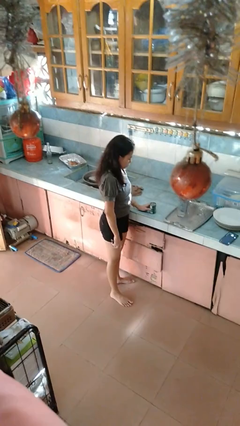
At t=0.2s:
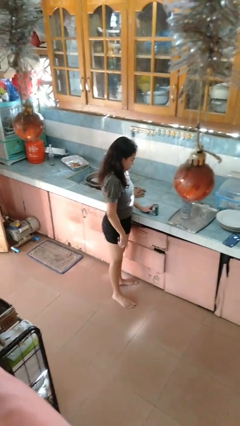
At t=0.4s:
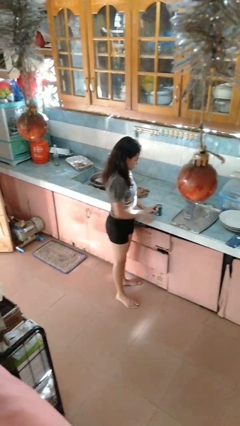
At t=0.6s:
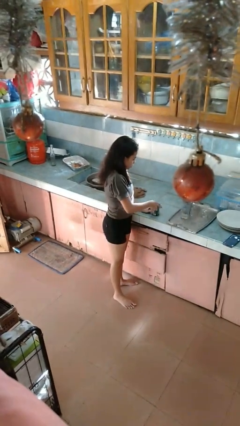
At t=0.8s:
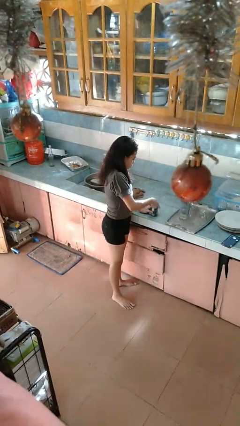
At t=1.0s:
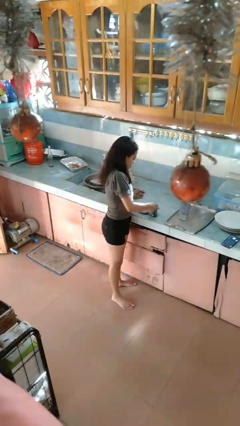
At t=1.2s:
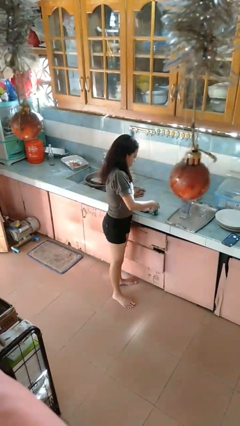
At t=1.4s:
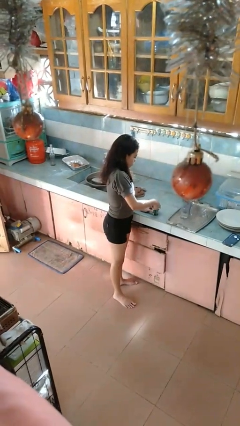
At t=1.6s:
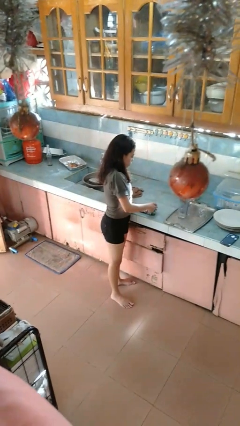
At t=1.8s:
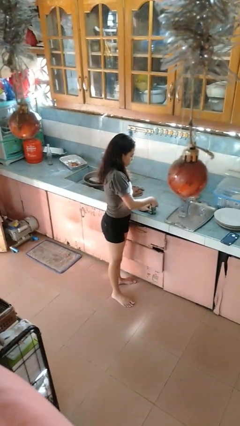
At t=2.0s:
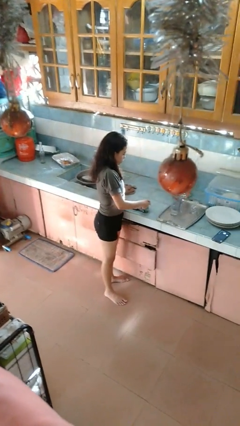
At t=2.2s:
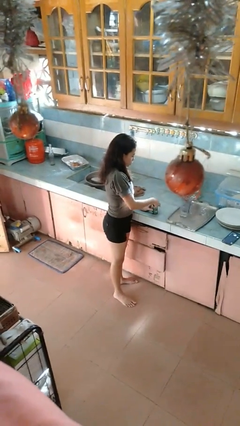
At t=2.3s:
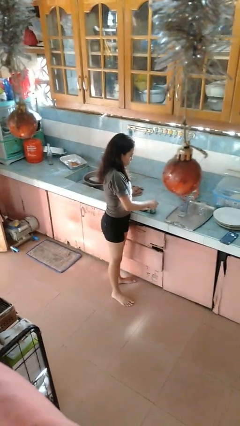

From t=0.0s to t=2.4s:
person opens can with can opener

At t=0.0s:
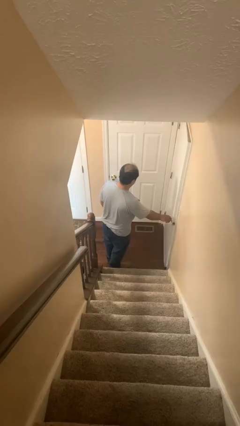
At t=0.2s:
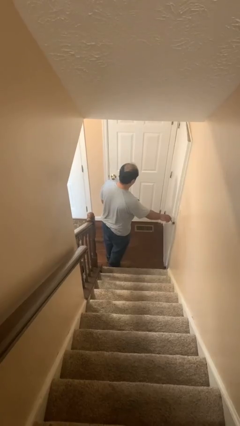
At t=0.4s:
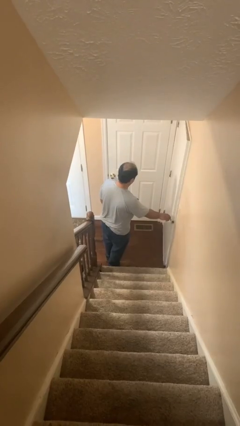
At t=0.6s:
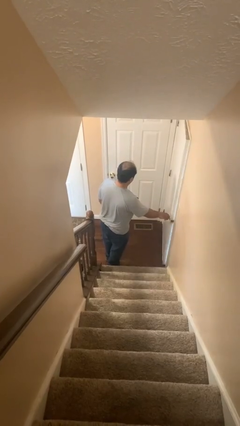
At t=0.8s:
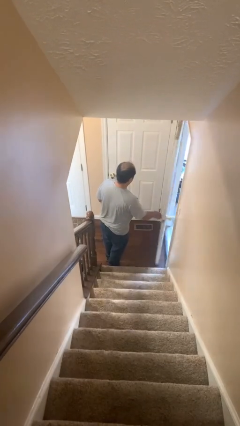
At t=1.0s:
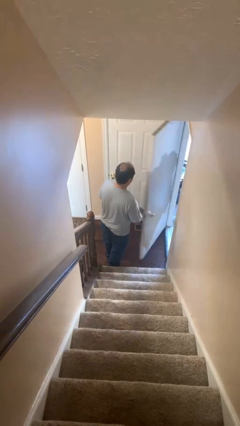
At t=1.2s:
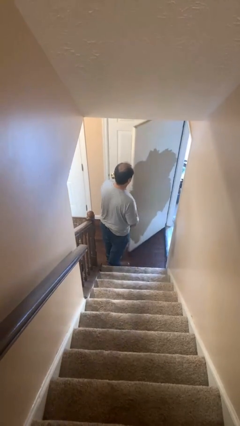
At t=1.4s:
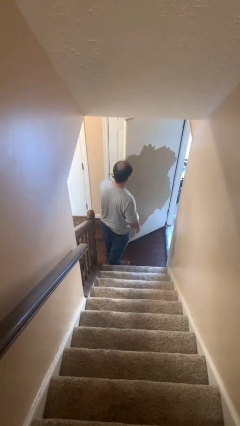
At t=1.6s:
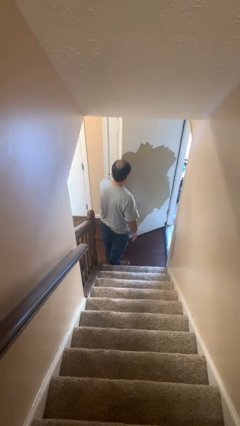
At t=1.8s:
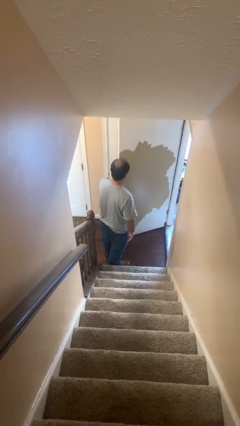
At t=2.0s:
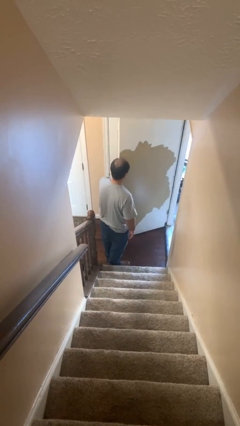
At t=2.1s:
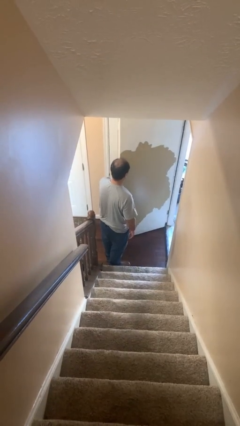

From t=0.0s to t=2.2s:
person opens facility door

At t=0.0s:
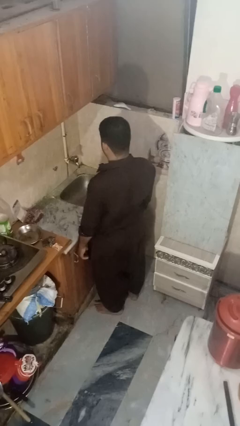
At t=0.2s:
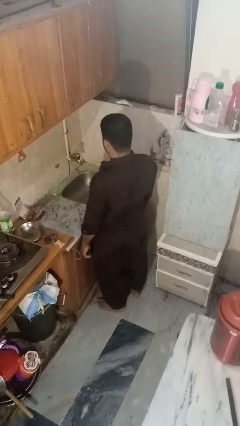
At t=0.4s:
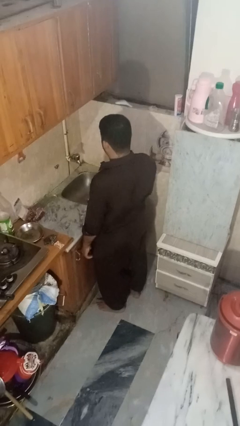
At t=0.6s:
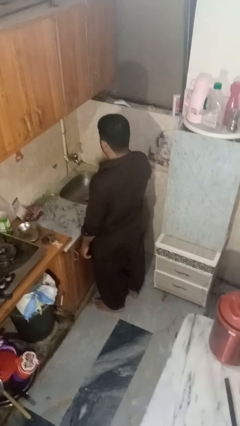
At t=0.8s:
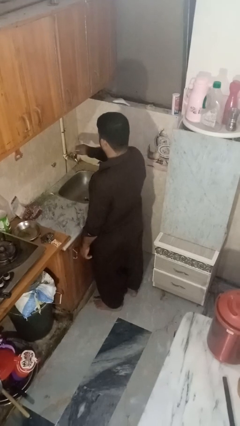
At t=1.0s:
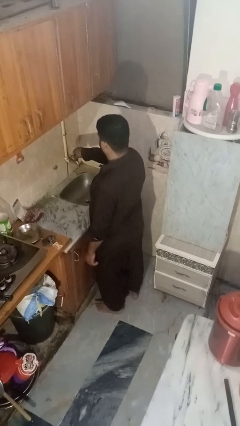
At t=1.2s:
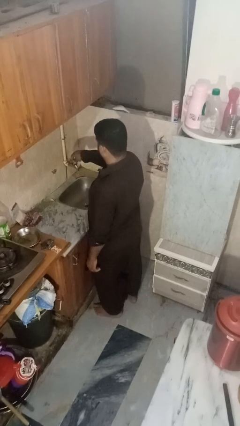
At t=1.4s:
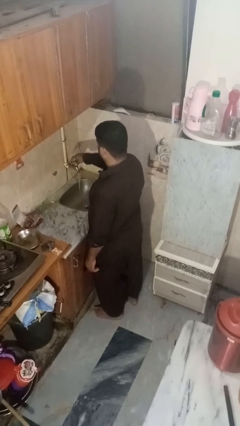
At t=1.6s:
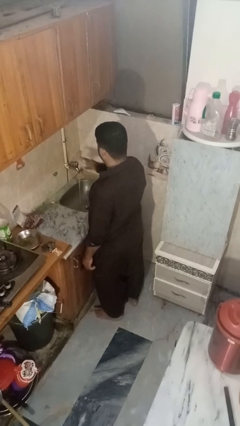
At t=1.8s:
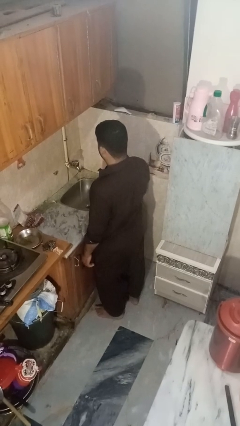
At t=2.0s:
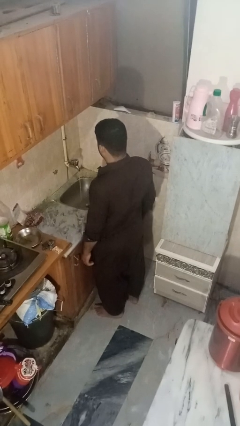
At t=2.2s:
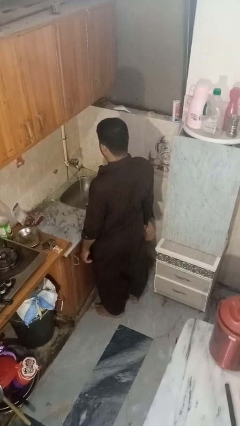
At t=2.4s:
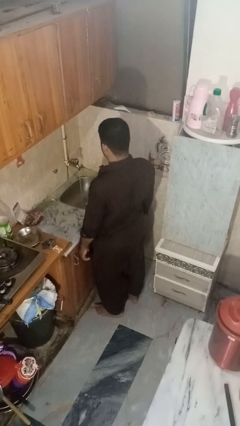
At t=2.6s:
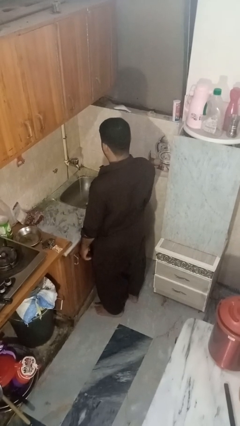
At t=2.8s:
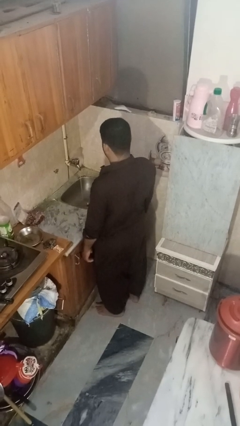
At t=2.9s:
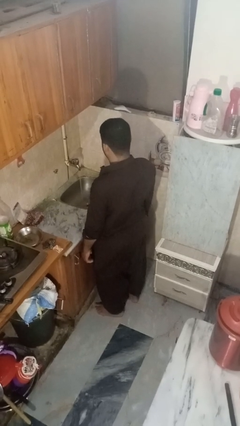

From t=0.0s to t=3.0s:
person turns on faucet

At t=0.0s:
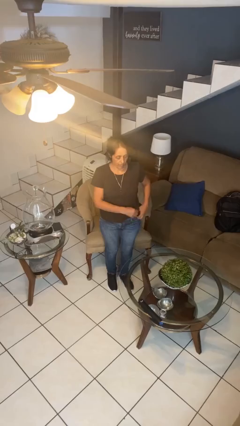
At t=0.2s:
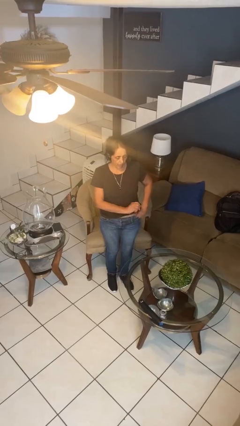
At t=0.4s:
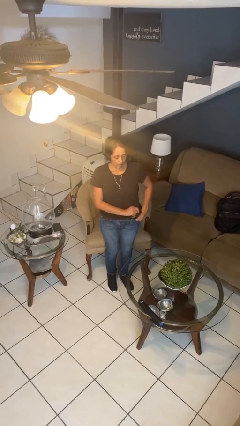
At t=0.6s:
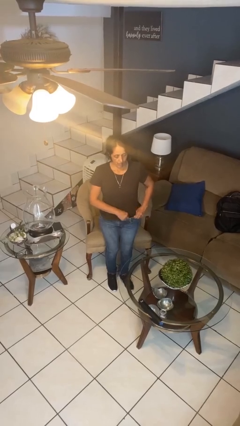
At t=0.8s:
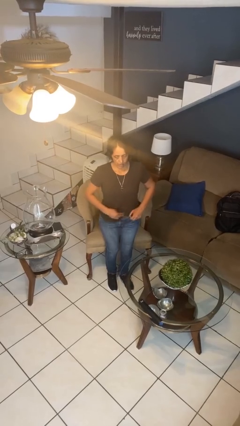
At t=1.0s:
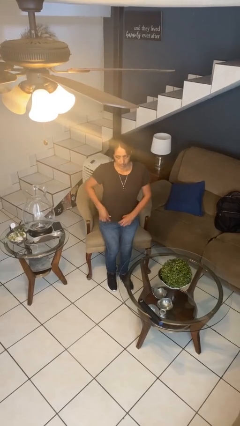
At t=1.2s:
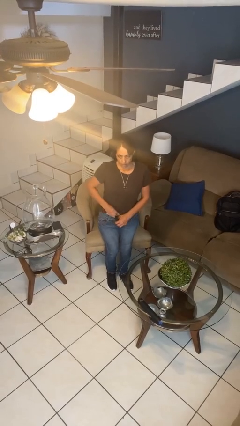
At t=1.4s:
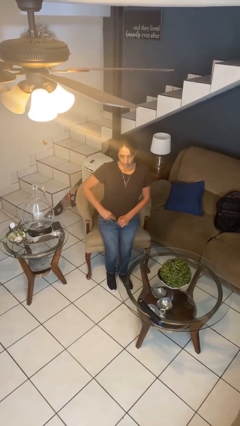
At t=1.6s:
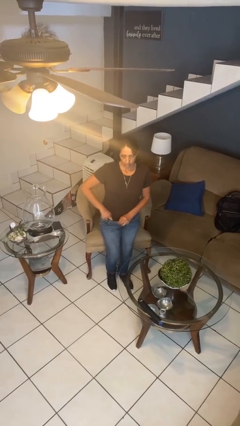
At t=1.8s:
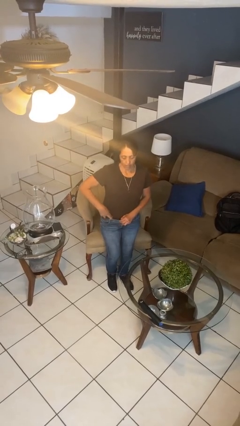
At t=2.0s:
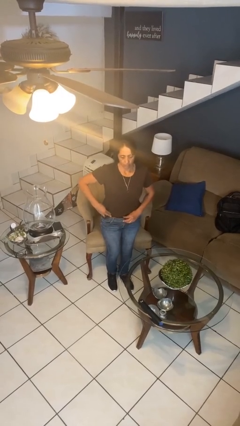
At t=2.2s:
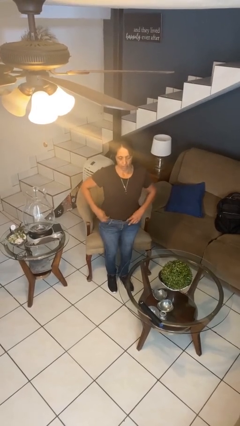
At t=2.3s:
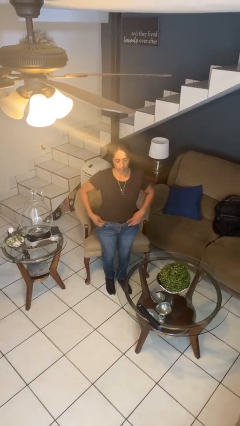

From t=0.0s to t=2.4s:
person tucks in shirt

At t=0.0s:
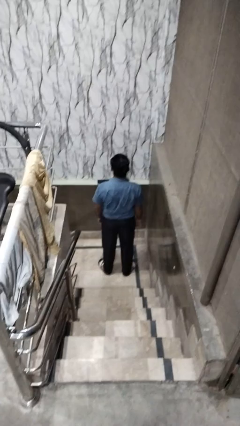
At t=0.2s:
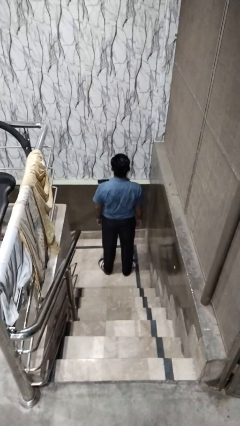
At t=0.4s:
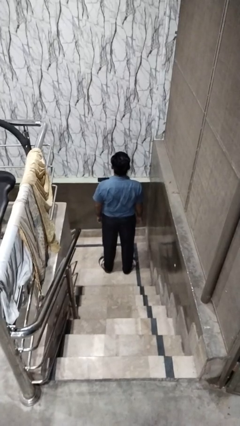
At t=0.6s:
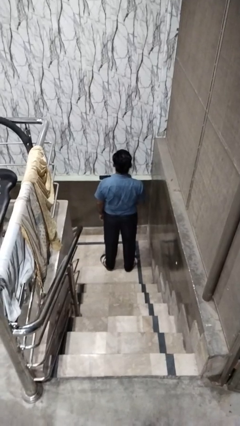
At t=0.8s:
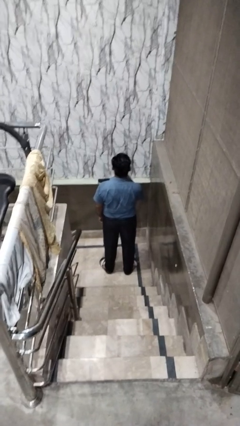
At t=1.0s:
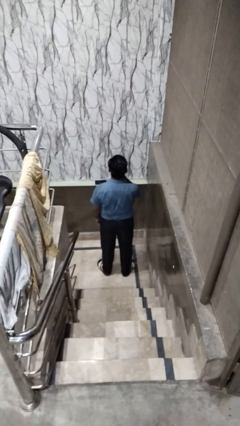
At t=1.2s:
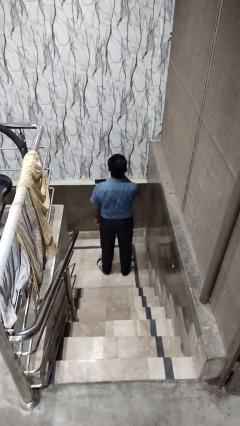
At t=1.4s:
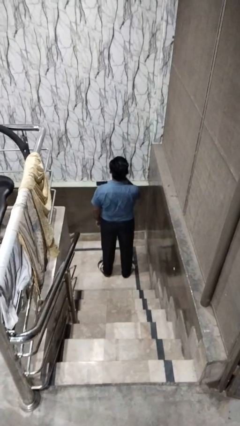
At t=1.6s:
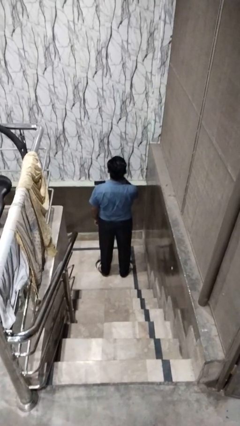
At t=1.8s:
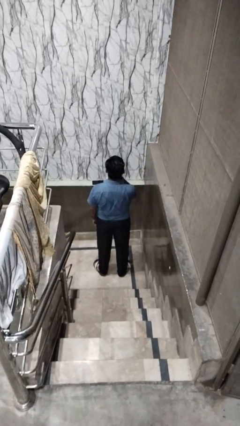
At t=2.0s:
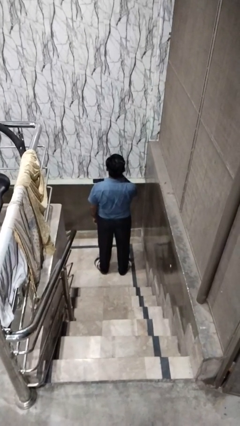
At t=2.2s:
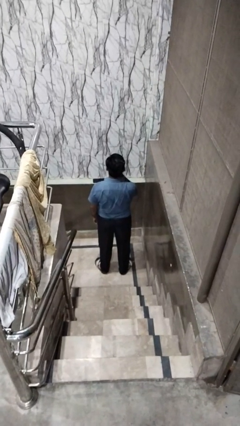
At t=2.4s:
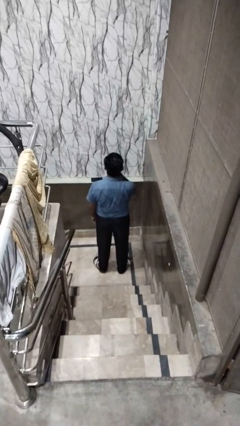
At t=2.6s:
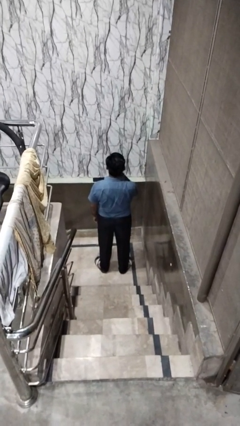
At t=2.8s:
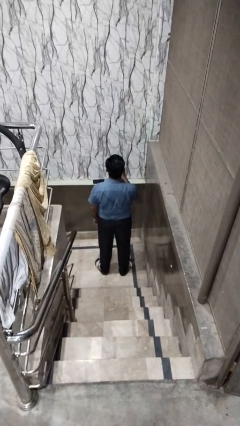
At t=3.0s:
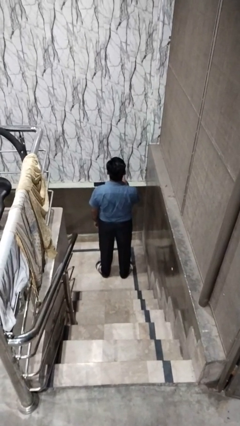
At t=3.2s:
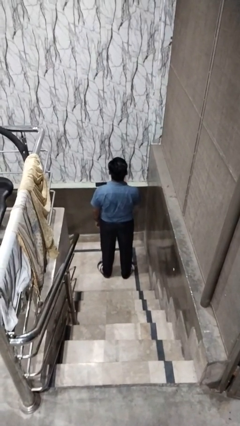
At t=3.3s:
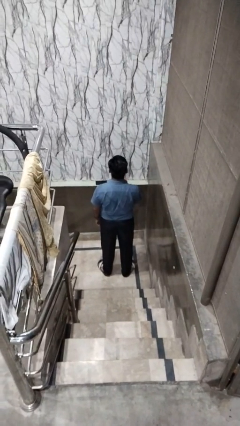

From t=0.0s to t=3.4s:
person gestures be quiet

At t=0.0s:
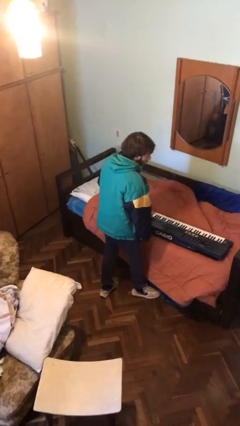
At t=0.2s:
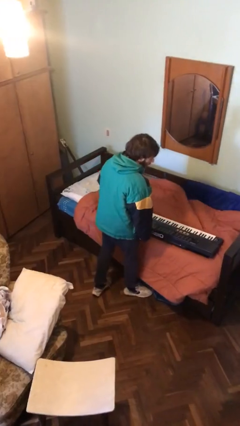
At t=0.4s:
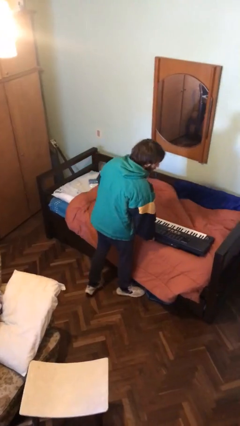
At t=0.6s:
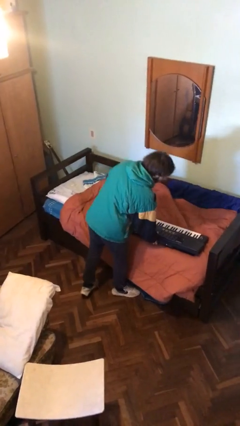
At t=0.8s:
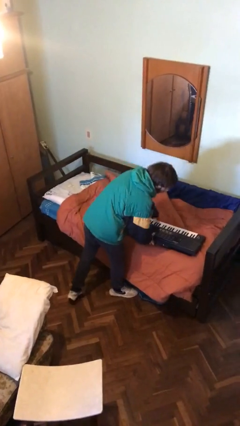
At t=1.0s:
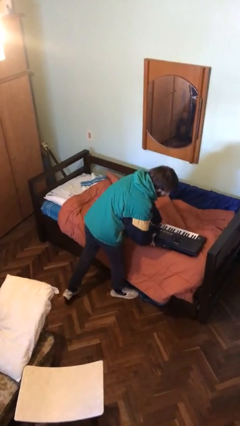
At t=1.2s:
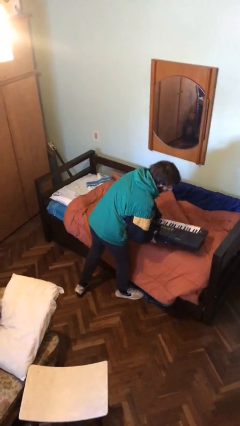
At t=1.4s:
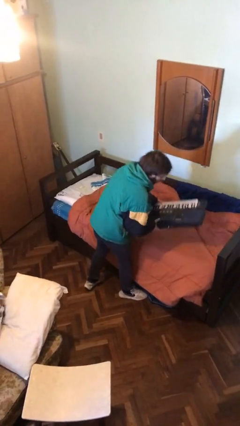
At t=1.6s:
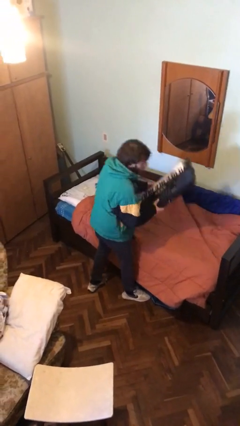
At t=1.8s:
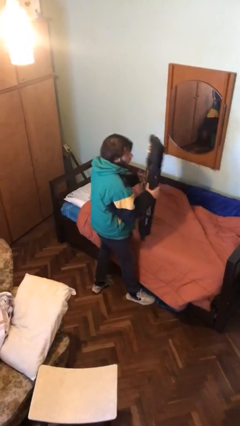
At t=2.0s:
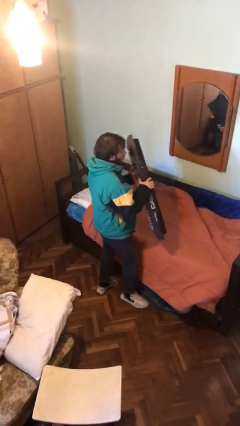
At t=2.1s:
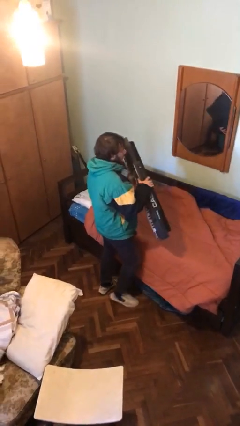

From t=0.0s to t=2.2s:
person picks up object from bed

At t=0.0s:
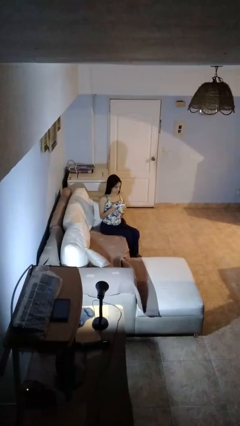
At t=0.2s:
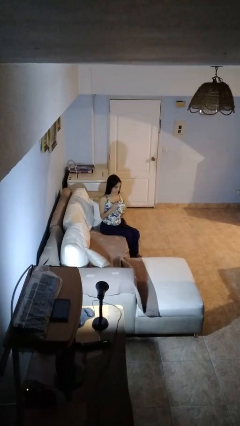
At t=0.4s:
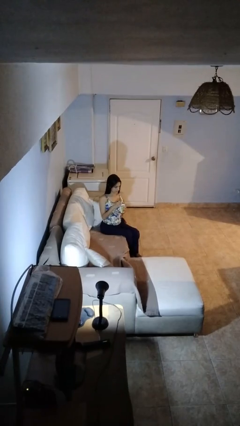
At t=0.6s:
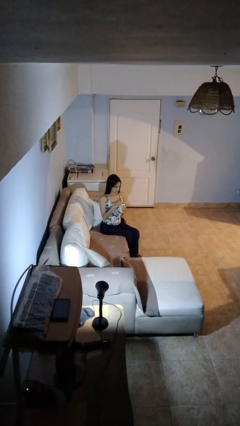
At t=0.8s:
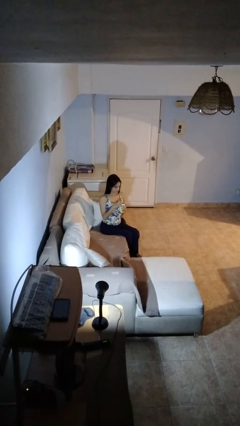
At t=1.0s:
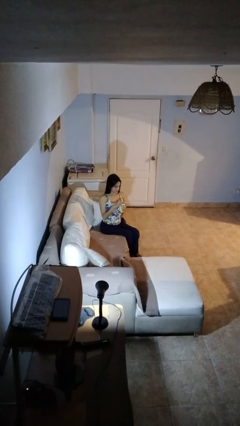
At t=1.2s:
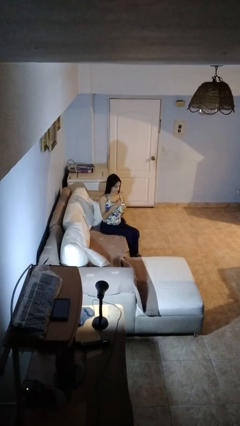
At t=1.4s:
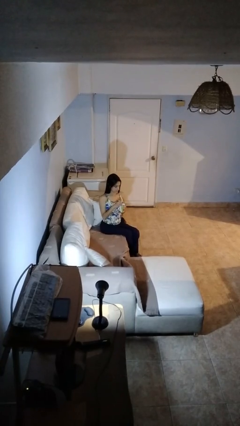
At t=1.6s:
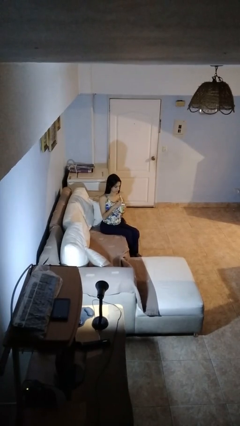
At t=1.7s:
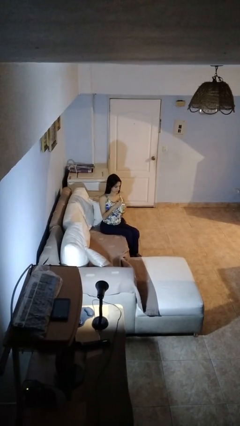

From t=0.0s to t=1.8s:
person stirs mug
